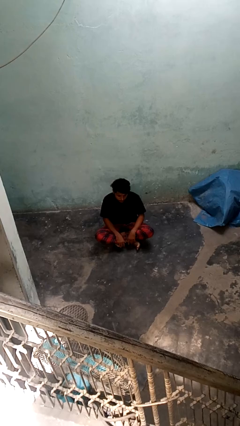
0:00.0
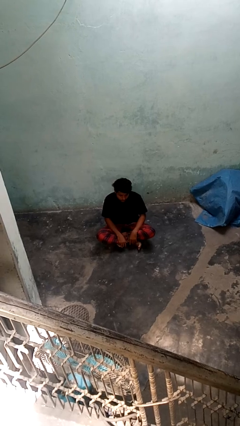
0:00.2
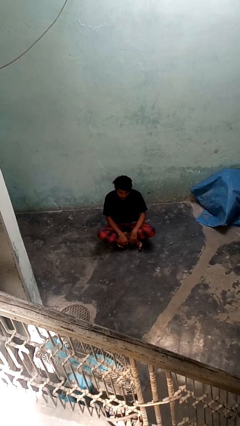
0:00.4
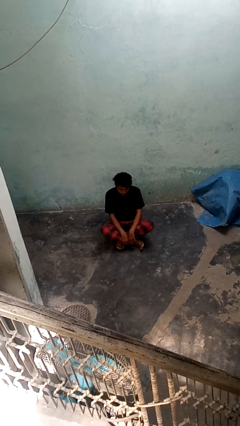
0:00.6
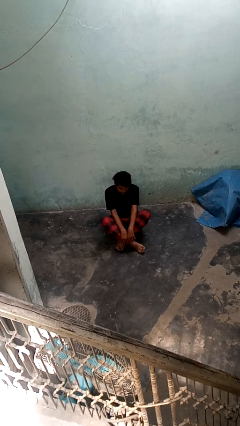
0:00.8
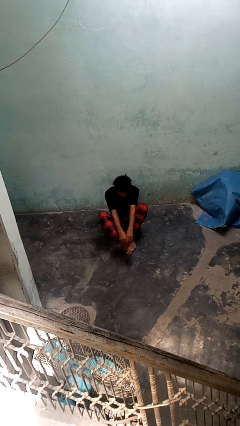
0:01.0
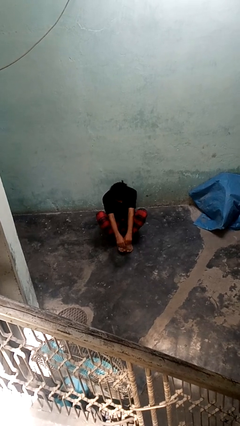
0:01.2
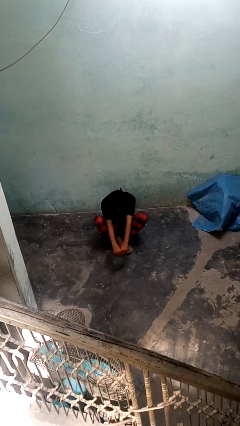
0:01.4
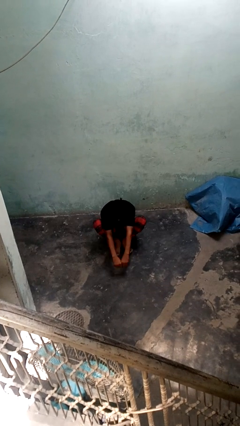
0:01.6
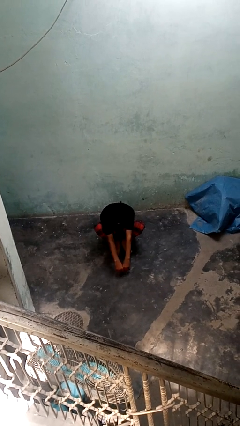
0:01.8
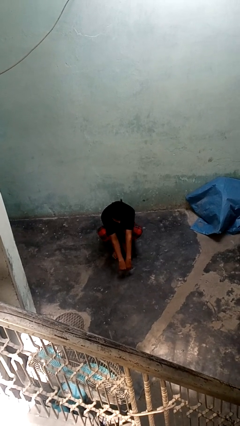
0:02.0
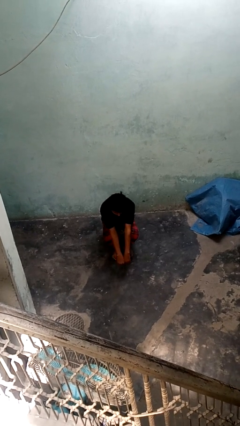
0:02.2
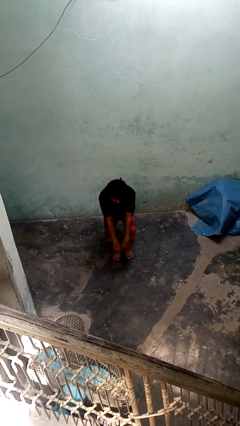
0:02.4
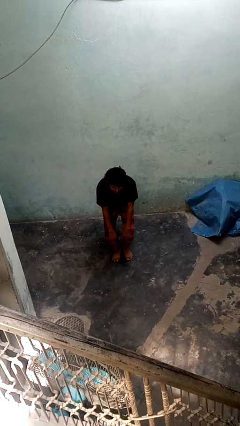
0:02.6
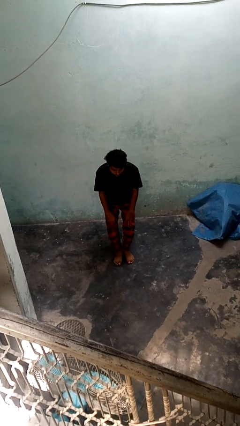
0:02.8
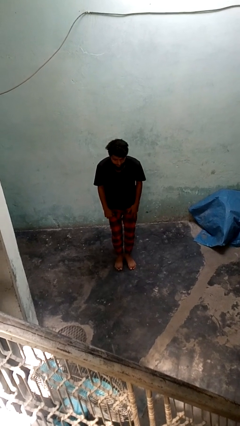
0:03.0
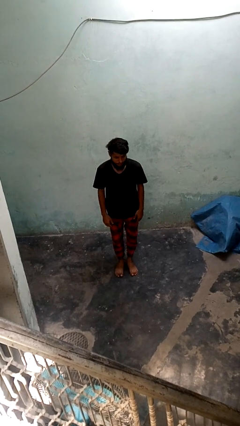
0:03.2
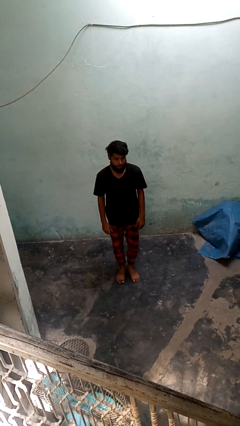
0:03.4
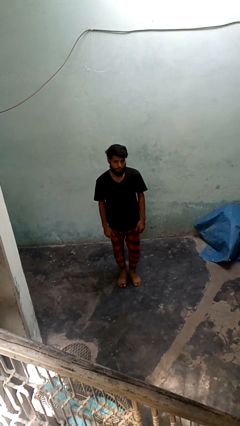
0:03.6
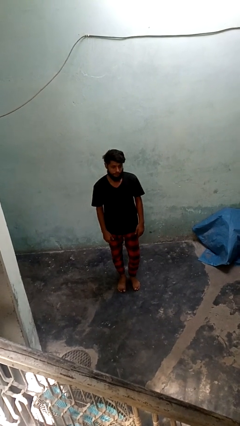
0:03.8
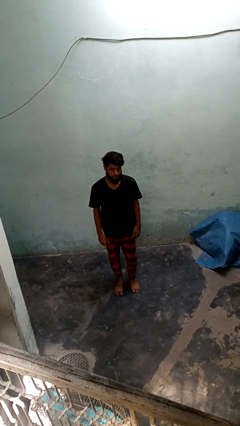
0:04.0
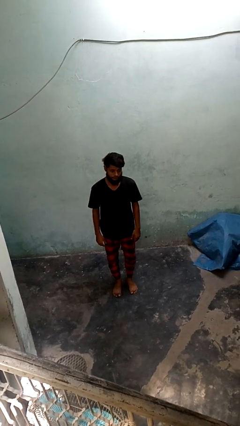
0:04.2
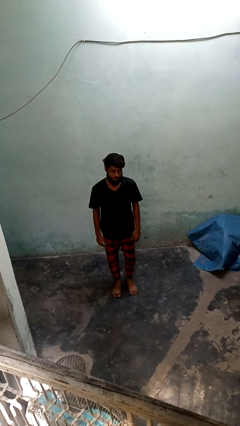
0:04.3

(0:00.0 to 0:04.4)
person stands up from floor

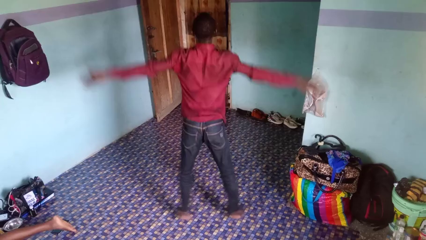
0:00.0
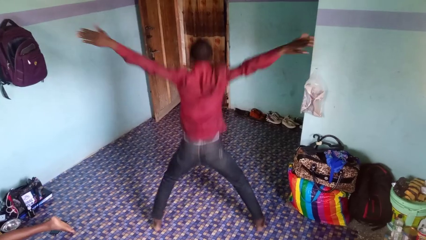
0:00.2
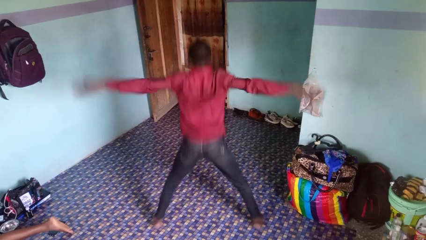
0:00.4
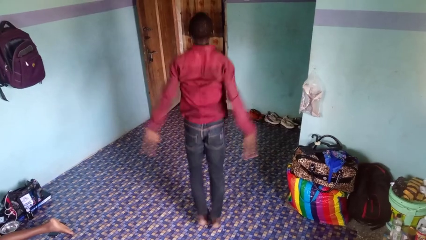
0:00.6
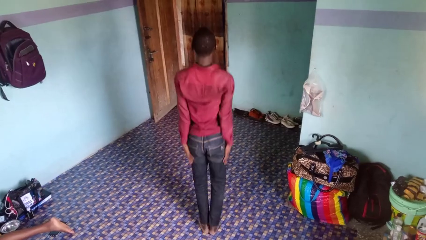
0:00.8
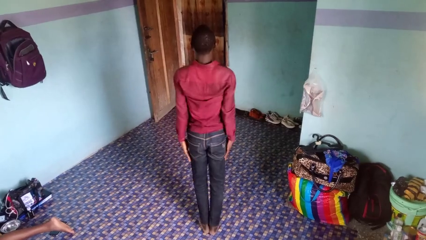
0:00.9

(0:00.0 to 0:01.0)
person exercises with jumping jacks

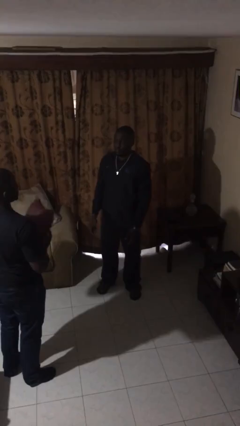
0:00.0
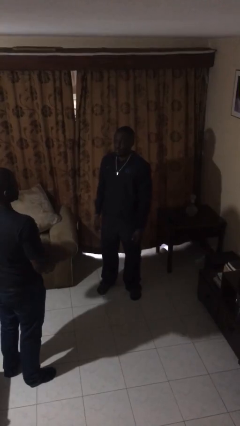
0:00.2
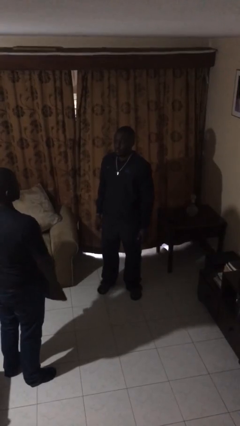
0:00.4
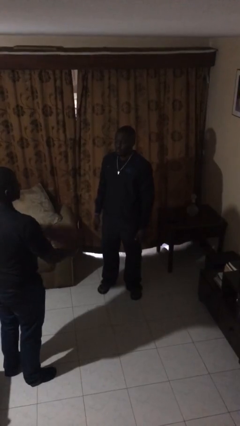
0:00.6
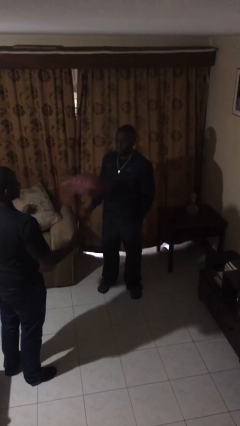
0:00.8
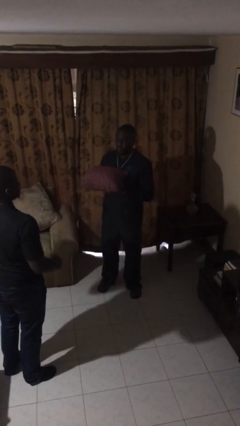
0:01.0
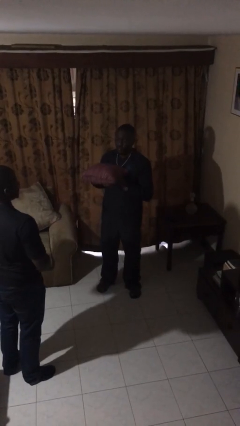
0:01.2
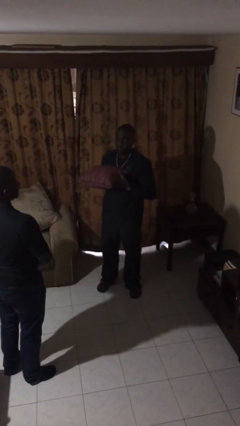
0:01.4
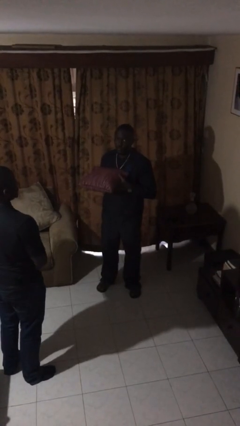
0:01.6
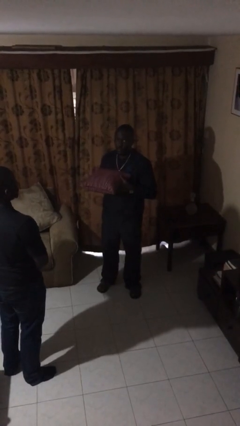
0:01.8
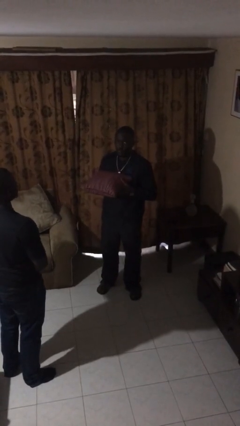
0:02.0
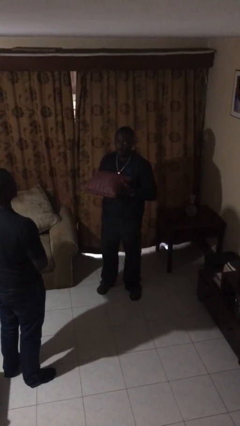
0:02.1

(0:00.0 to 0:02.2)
person catches object from person

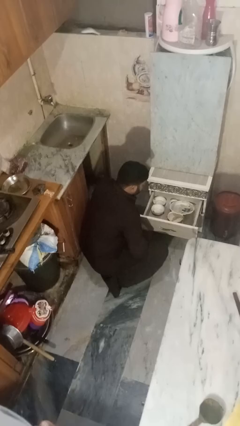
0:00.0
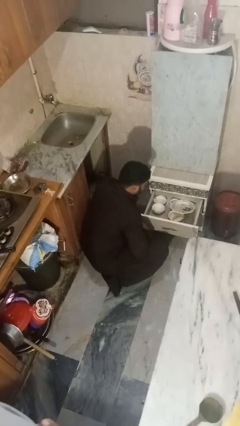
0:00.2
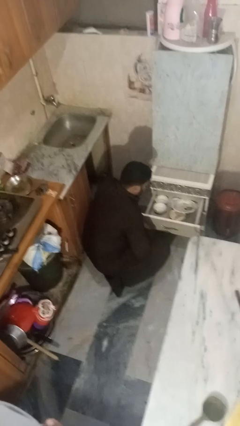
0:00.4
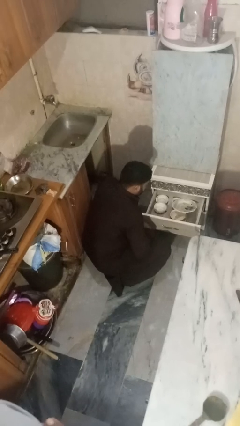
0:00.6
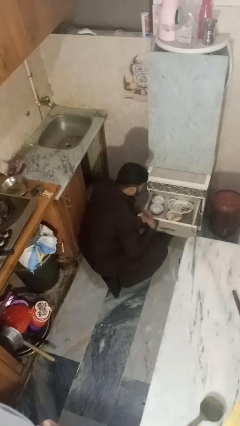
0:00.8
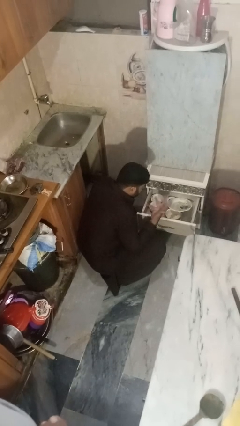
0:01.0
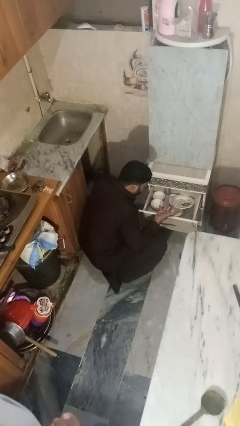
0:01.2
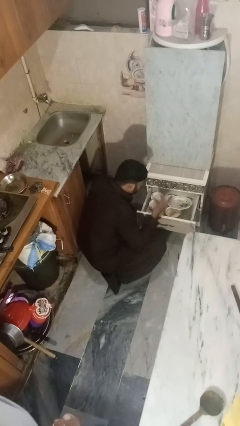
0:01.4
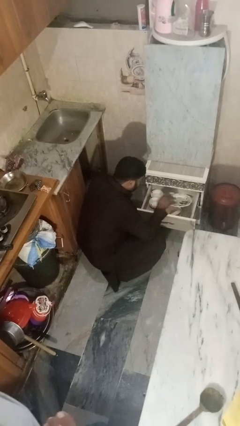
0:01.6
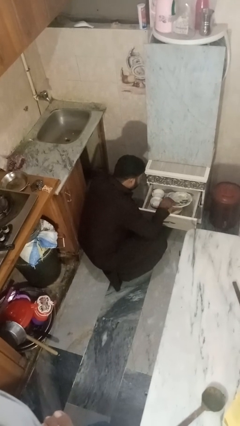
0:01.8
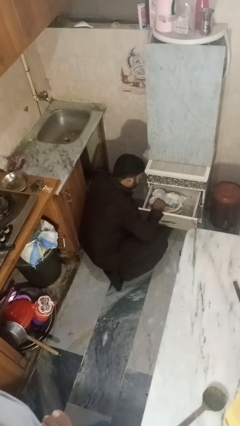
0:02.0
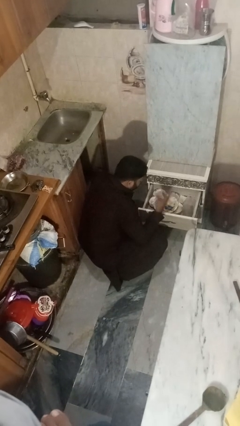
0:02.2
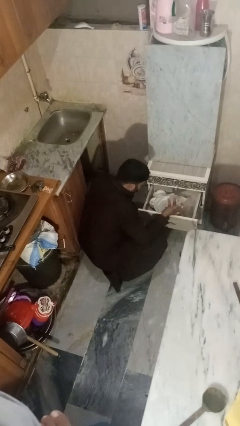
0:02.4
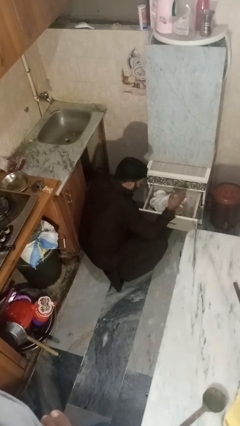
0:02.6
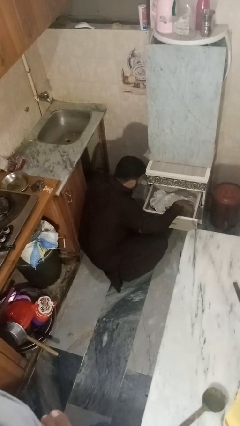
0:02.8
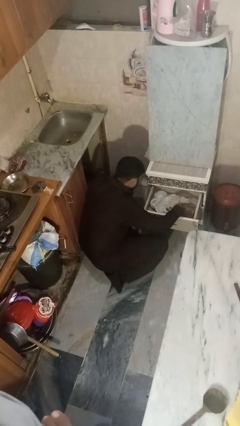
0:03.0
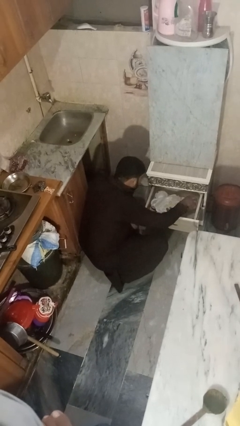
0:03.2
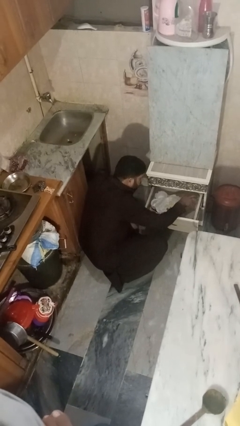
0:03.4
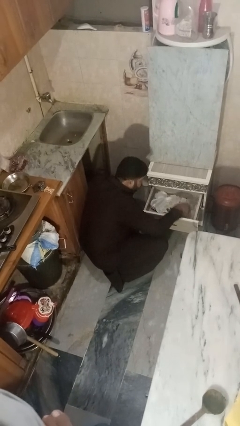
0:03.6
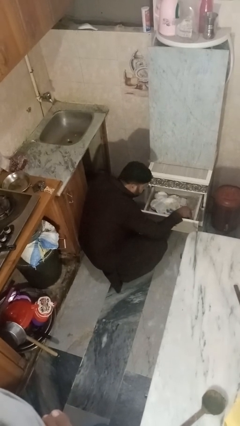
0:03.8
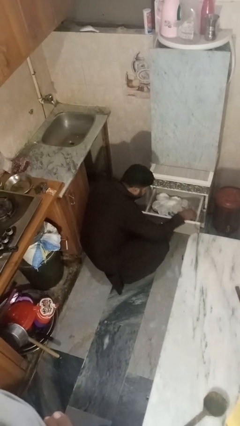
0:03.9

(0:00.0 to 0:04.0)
person searches in kitchen drawer

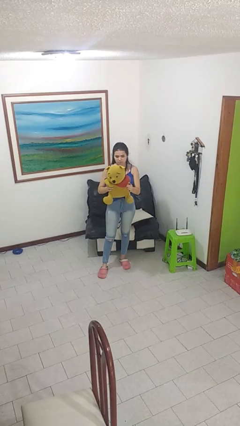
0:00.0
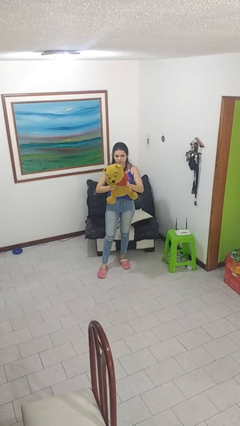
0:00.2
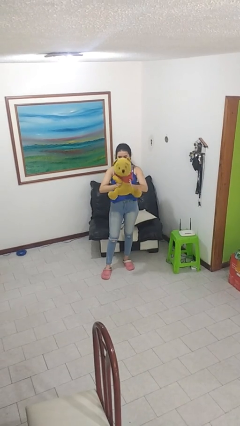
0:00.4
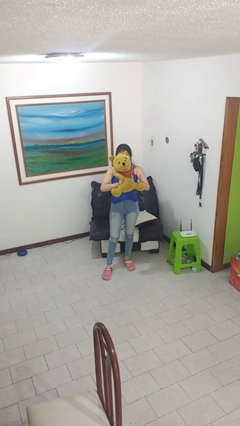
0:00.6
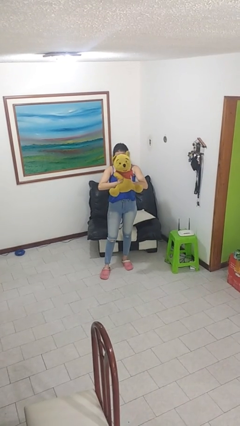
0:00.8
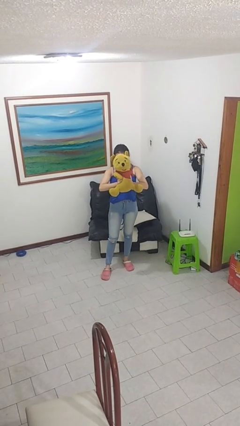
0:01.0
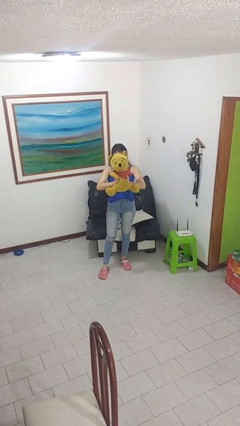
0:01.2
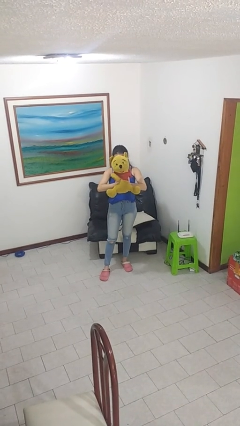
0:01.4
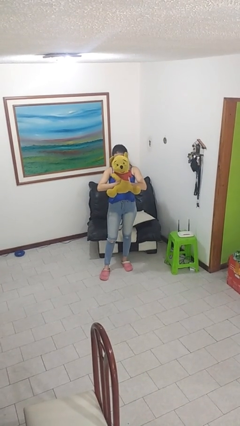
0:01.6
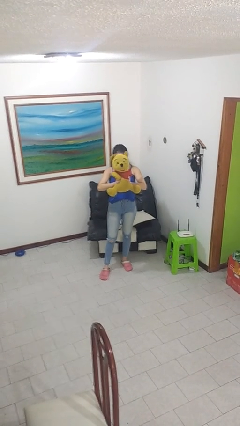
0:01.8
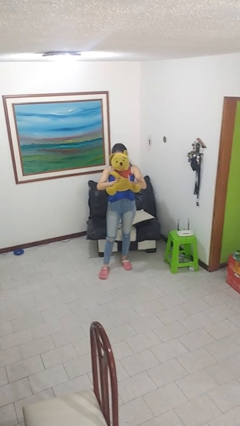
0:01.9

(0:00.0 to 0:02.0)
person squeezes object

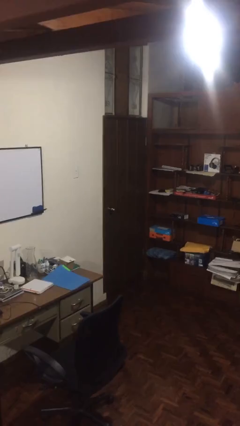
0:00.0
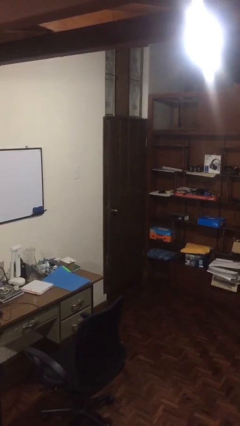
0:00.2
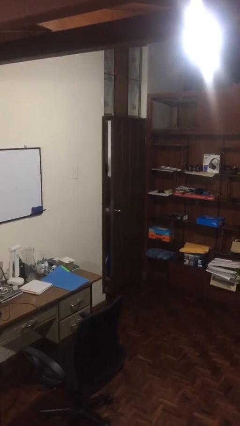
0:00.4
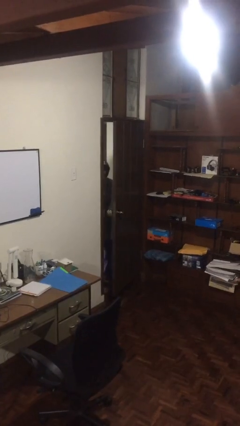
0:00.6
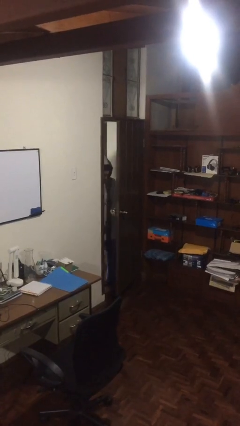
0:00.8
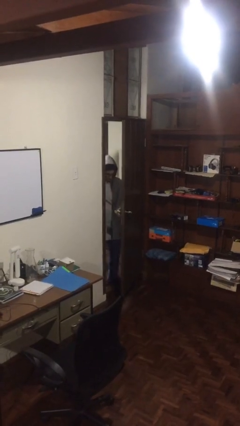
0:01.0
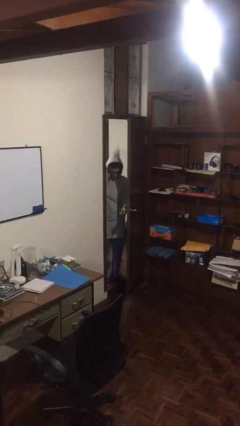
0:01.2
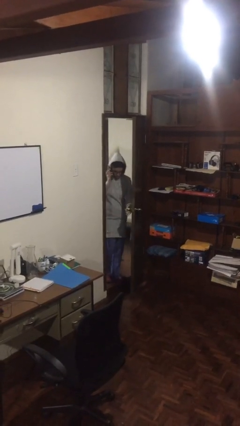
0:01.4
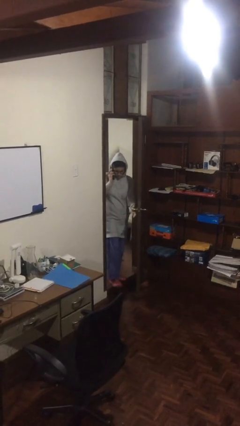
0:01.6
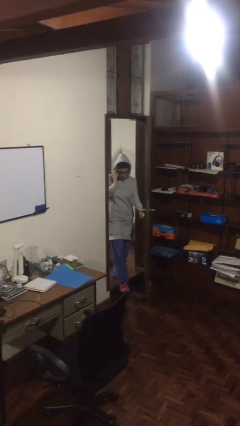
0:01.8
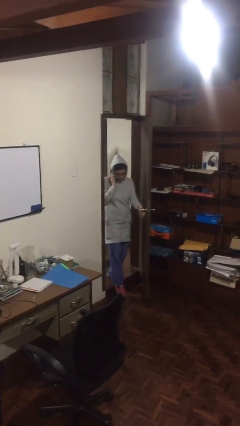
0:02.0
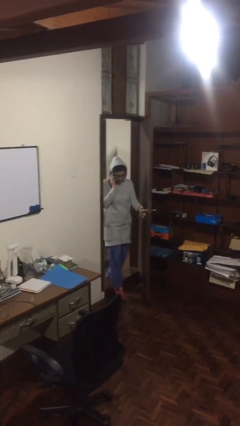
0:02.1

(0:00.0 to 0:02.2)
person opens facility door

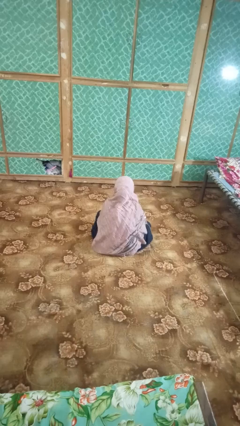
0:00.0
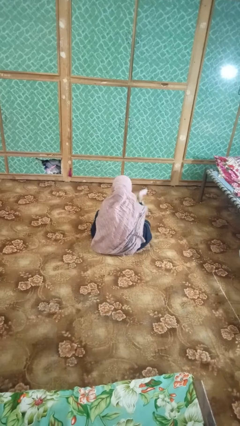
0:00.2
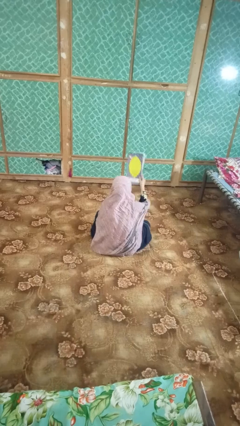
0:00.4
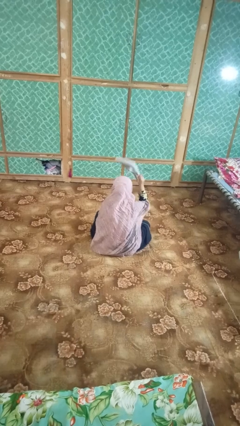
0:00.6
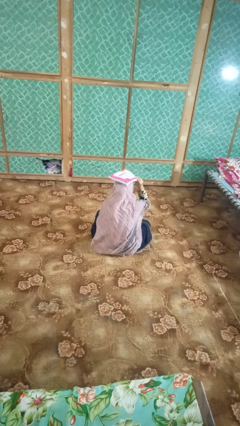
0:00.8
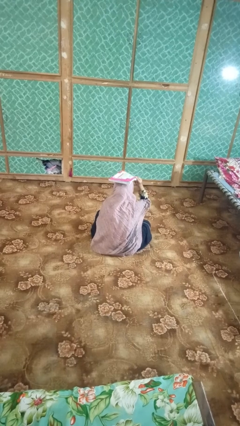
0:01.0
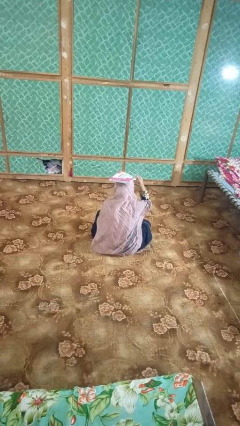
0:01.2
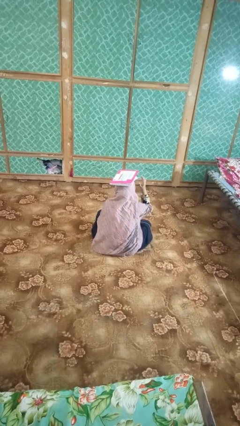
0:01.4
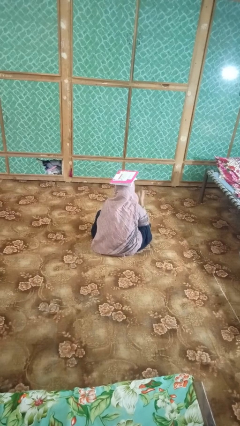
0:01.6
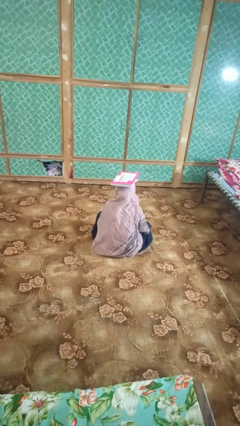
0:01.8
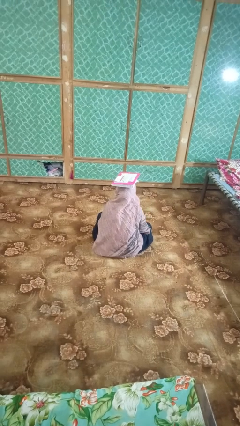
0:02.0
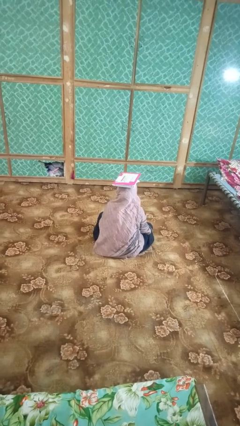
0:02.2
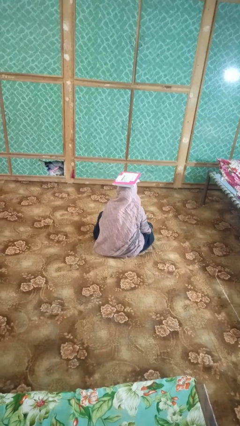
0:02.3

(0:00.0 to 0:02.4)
person holds object above head
